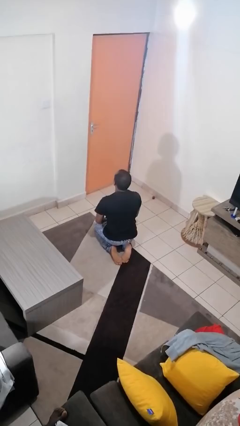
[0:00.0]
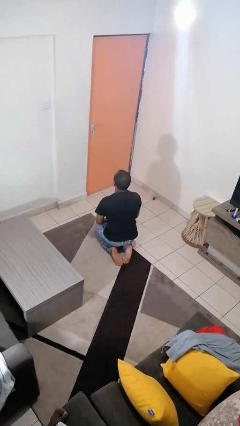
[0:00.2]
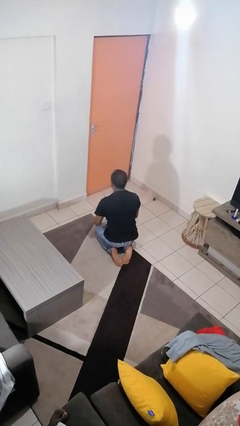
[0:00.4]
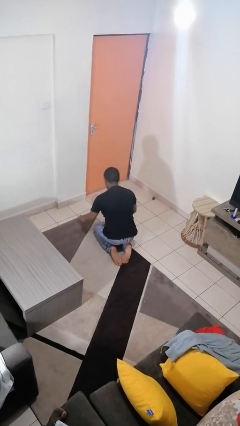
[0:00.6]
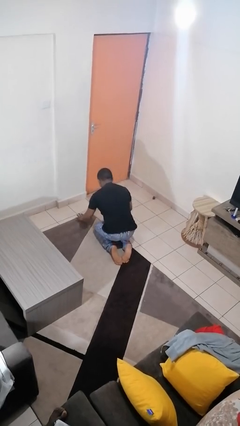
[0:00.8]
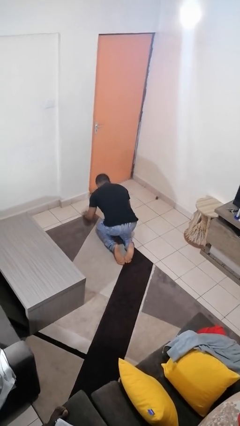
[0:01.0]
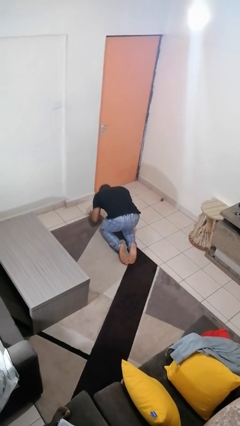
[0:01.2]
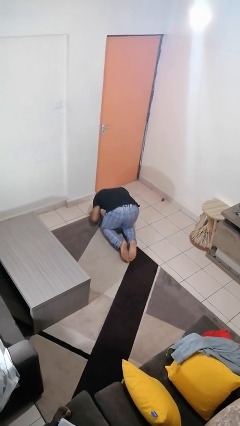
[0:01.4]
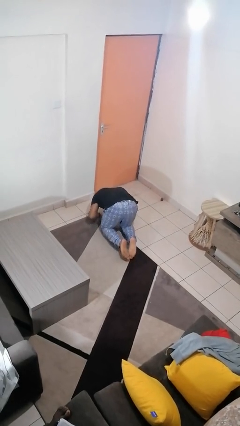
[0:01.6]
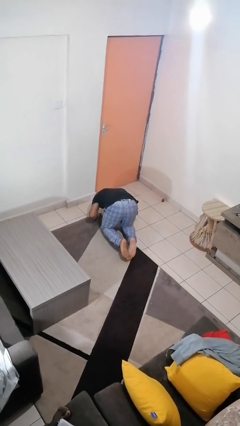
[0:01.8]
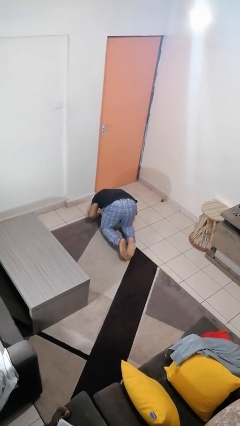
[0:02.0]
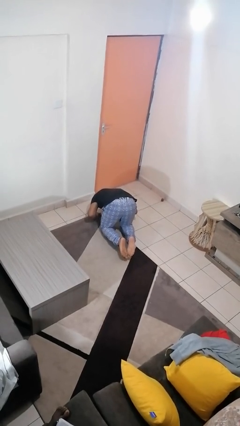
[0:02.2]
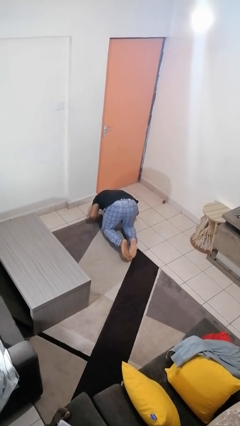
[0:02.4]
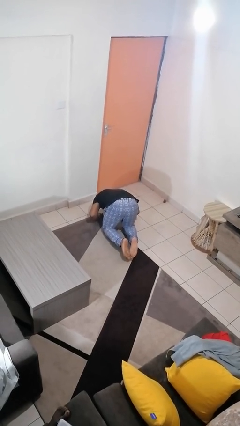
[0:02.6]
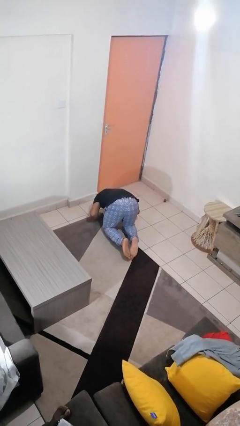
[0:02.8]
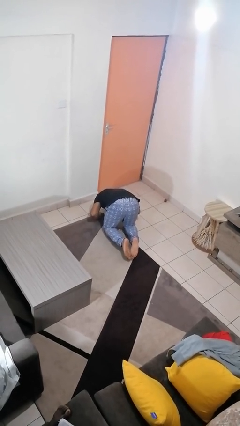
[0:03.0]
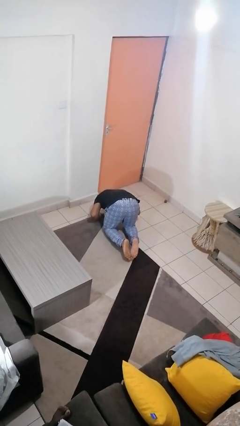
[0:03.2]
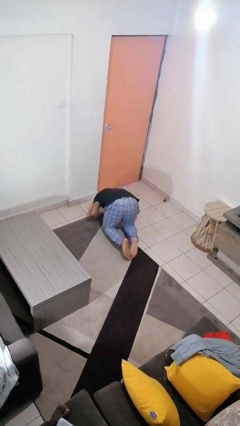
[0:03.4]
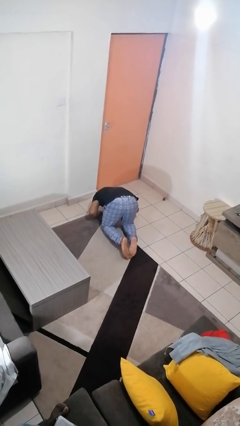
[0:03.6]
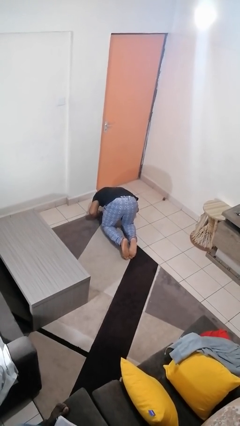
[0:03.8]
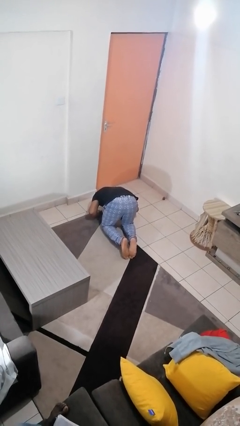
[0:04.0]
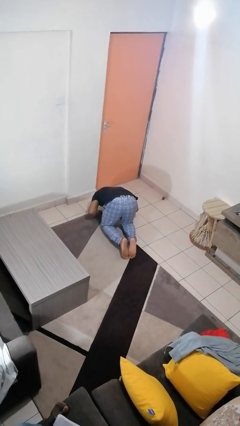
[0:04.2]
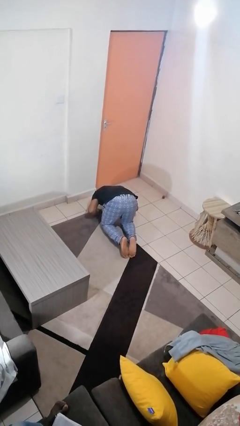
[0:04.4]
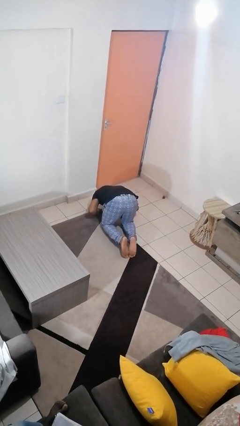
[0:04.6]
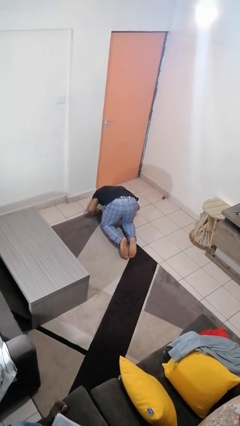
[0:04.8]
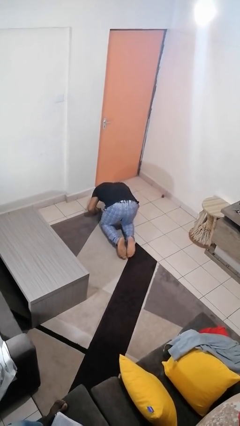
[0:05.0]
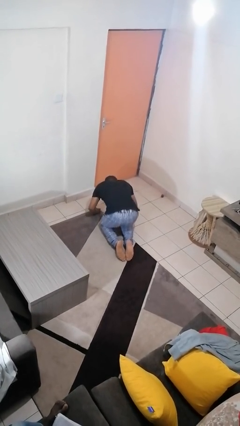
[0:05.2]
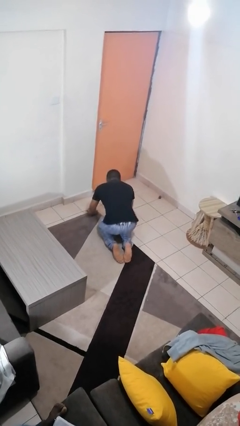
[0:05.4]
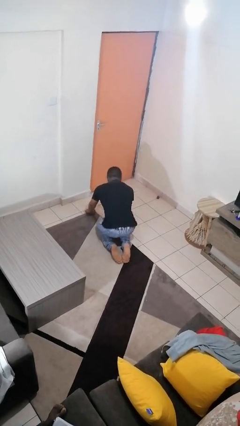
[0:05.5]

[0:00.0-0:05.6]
person prays

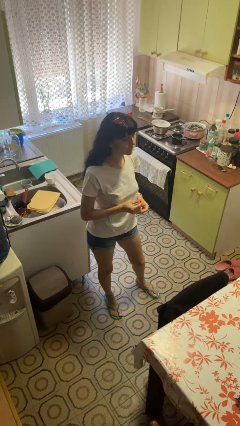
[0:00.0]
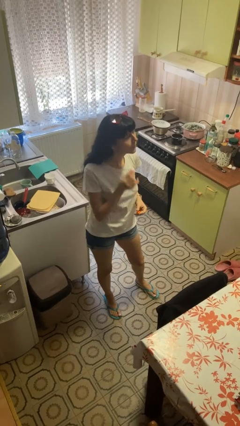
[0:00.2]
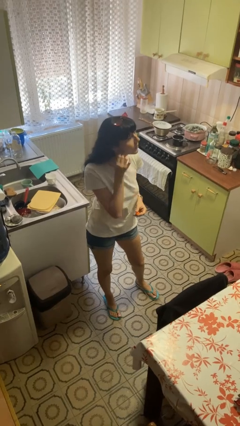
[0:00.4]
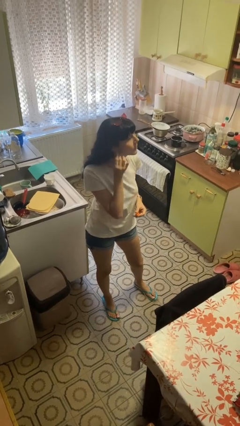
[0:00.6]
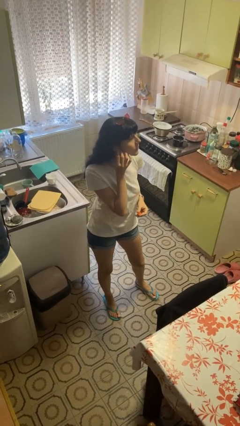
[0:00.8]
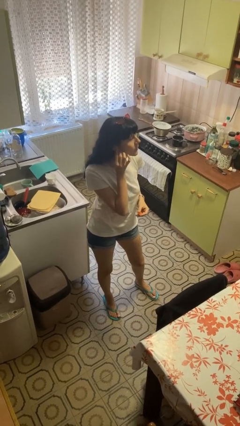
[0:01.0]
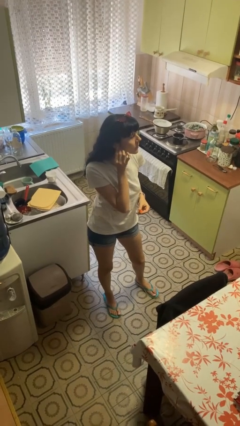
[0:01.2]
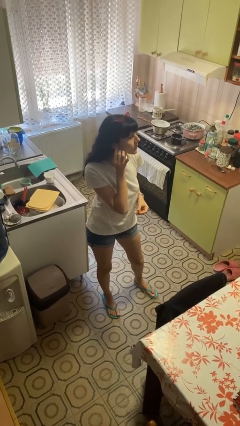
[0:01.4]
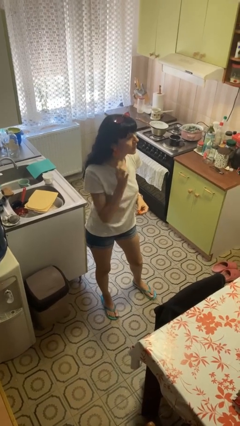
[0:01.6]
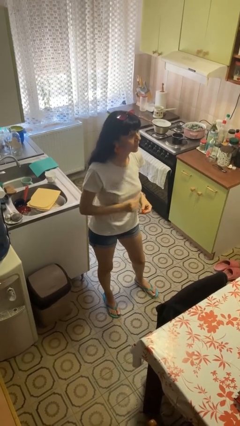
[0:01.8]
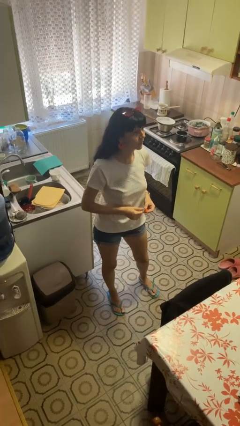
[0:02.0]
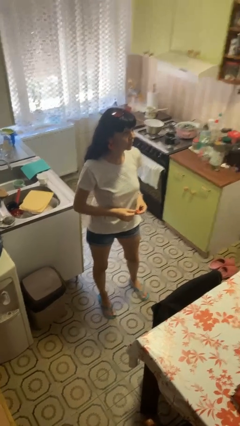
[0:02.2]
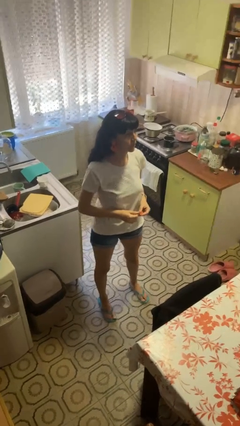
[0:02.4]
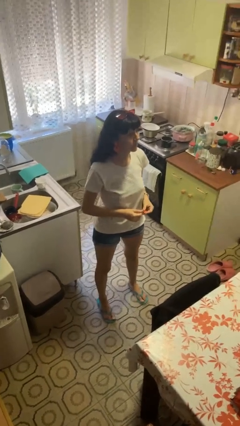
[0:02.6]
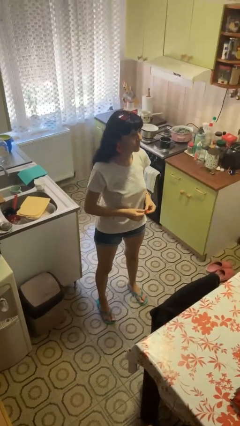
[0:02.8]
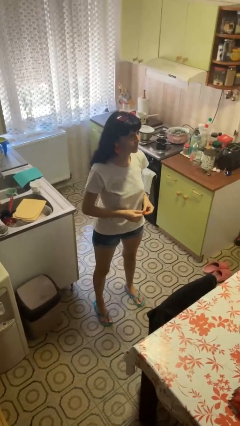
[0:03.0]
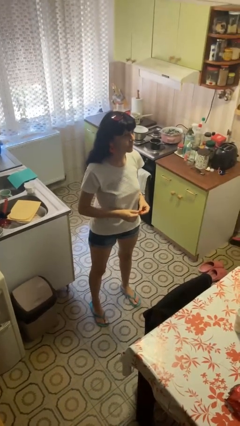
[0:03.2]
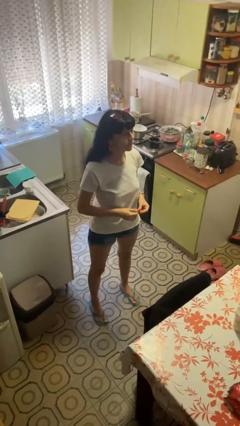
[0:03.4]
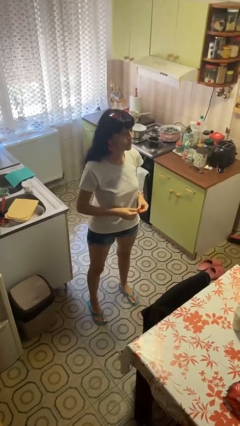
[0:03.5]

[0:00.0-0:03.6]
person puts on earrings

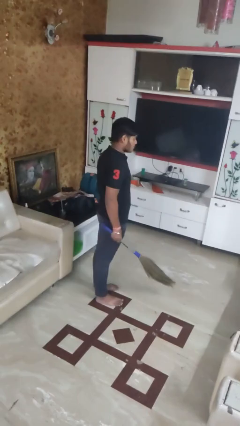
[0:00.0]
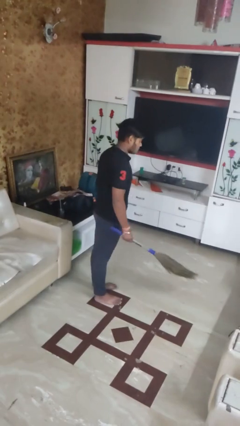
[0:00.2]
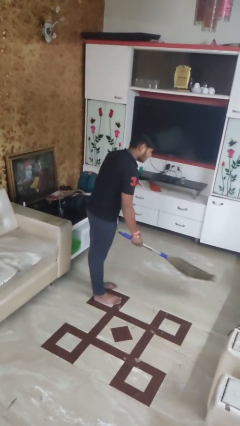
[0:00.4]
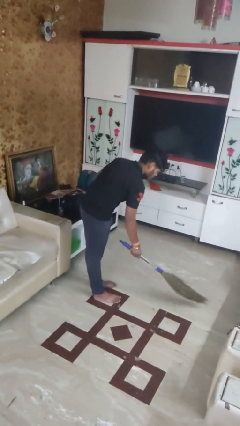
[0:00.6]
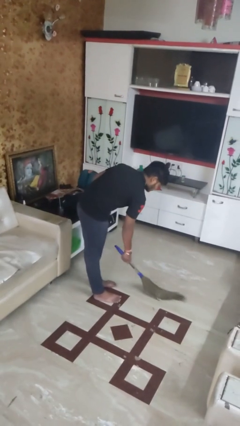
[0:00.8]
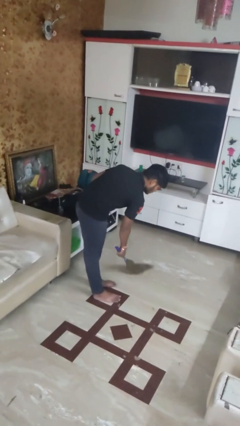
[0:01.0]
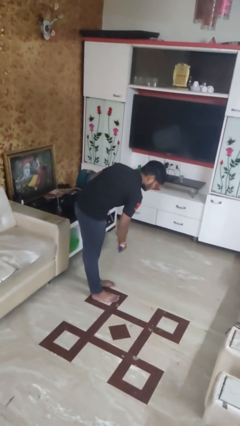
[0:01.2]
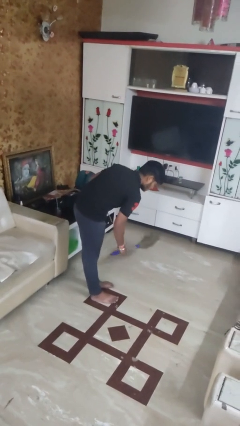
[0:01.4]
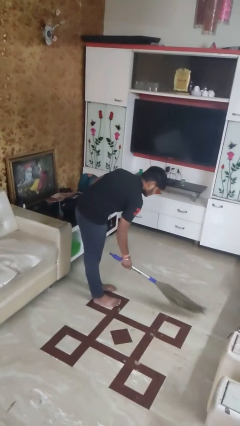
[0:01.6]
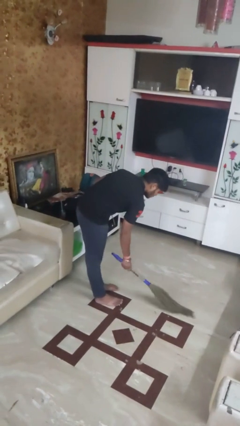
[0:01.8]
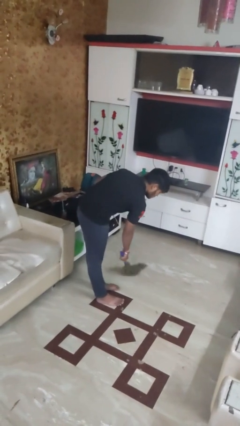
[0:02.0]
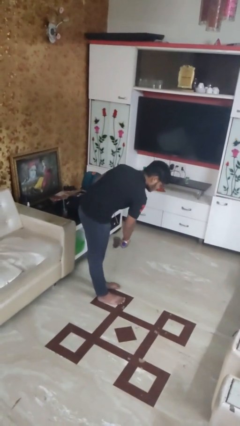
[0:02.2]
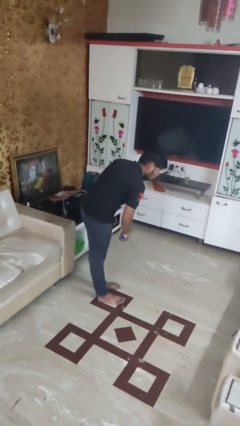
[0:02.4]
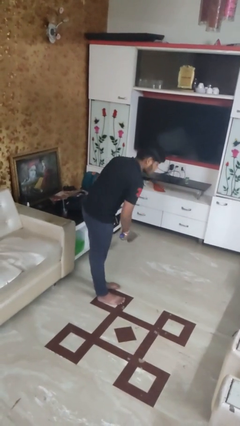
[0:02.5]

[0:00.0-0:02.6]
person sweeps floor

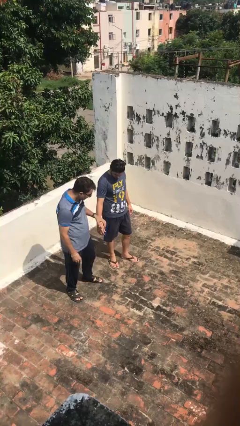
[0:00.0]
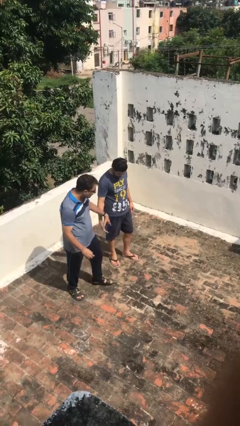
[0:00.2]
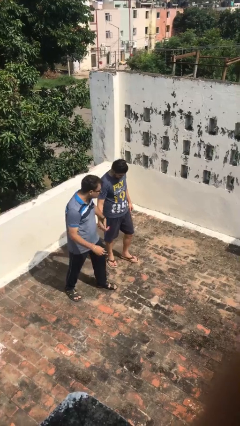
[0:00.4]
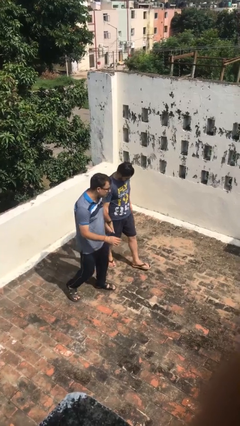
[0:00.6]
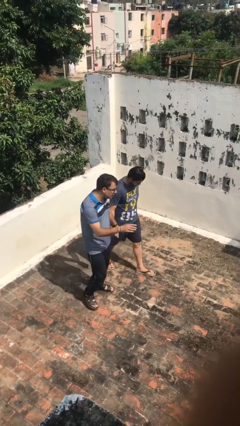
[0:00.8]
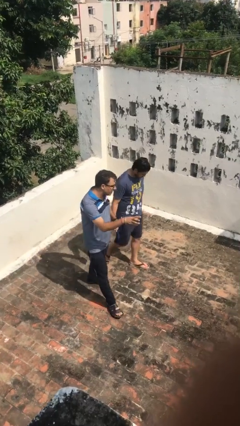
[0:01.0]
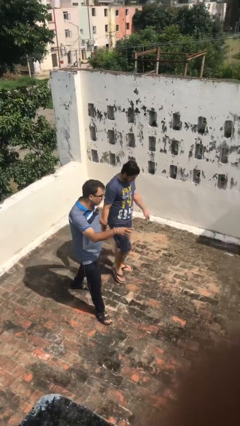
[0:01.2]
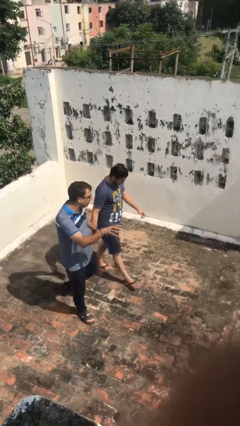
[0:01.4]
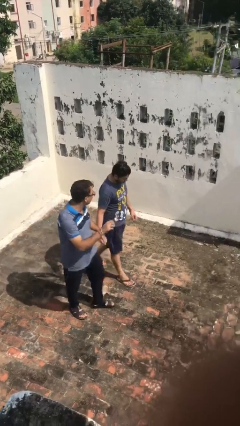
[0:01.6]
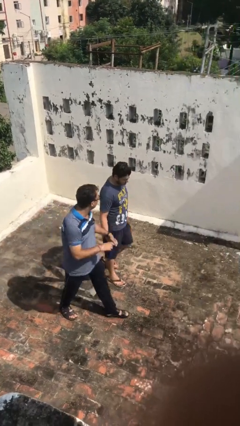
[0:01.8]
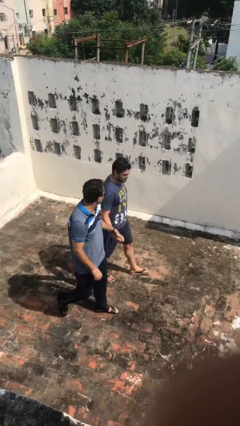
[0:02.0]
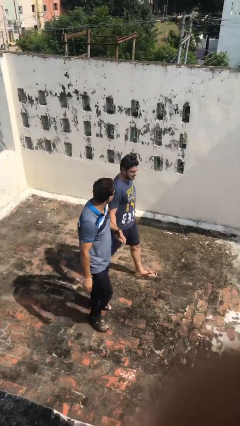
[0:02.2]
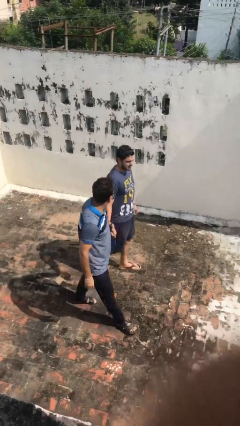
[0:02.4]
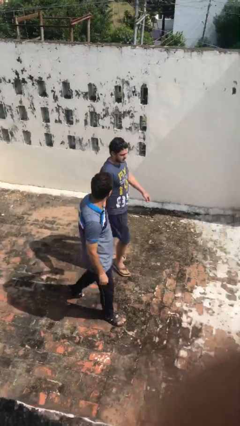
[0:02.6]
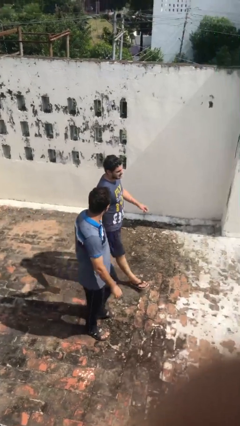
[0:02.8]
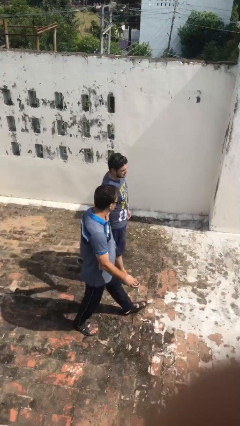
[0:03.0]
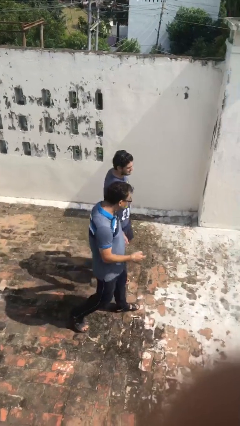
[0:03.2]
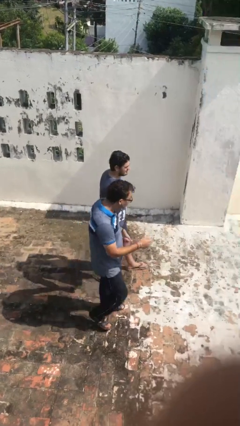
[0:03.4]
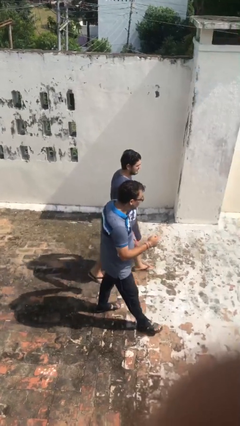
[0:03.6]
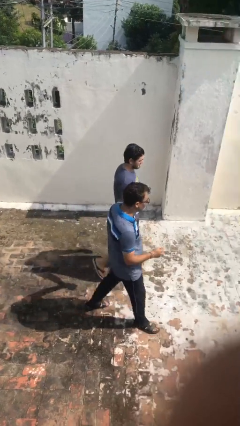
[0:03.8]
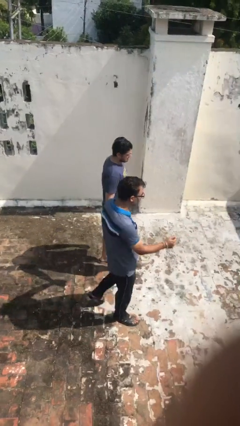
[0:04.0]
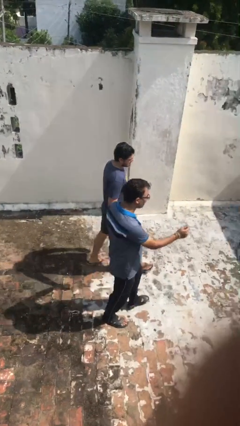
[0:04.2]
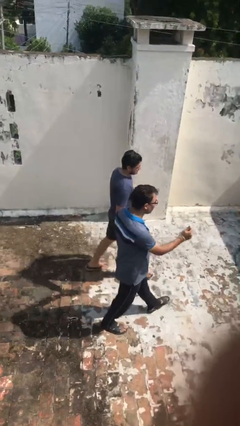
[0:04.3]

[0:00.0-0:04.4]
person holds hand

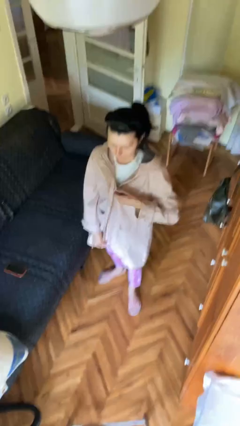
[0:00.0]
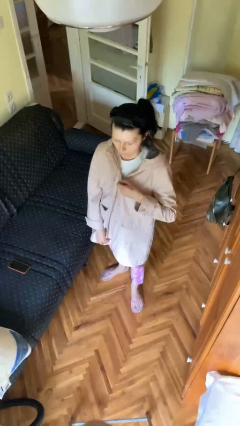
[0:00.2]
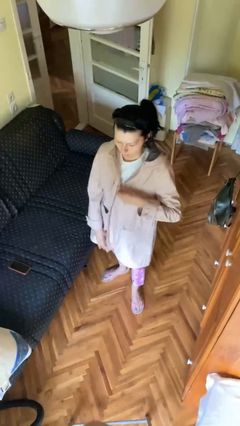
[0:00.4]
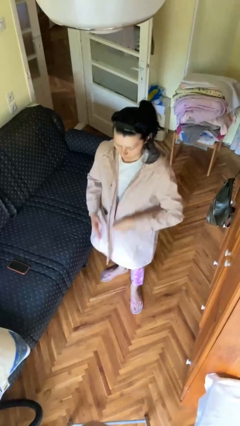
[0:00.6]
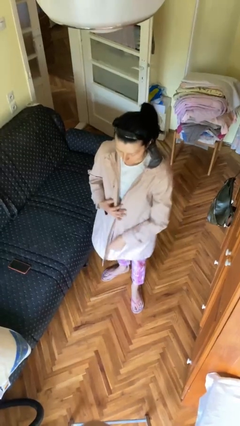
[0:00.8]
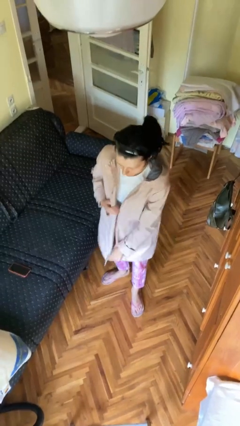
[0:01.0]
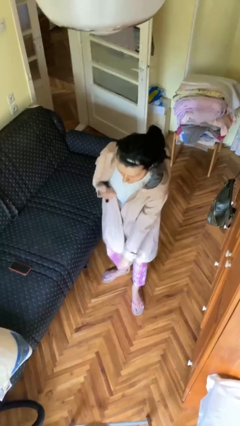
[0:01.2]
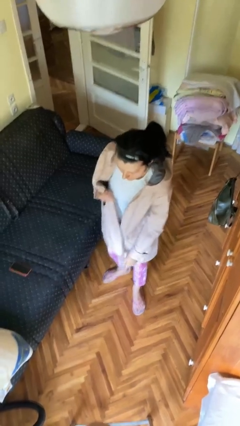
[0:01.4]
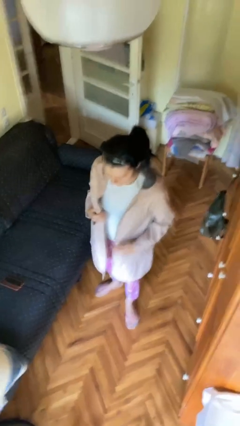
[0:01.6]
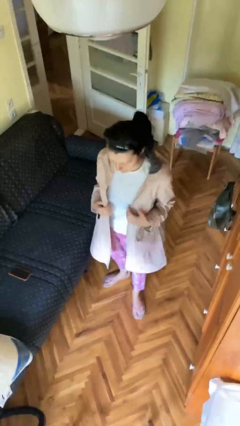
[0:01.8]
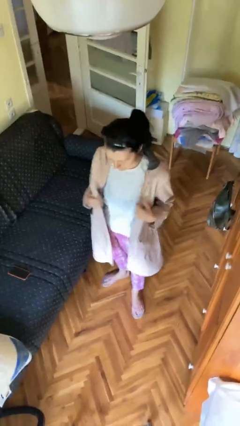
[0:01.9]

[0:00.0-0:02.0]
person unzips jacket
